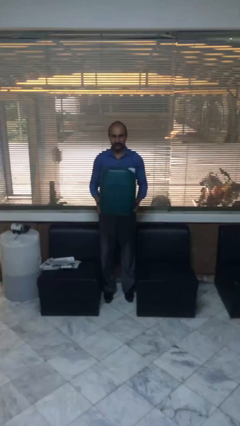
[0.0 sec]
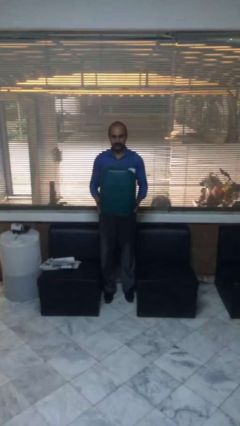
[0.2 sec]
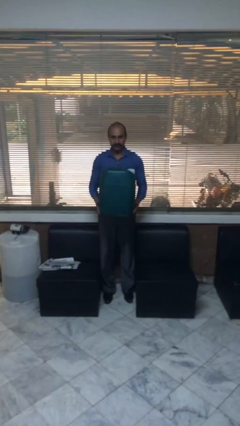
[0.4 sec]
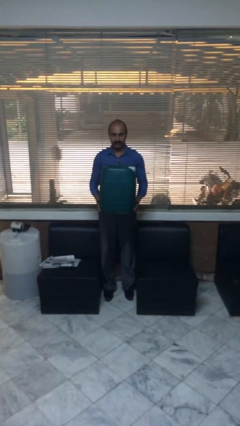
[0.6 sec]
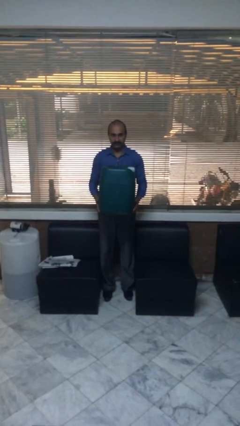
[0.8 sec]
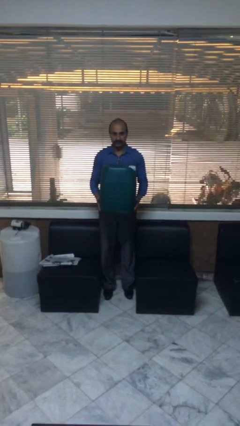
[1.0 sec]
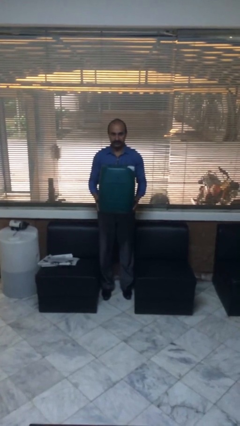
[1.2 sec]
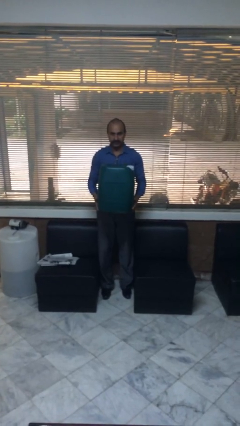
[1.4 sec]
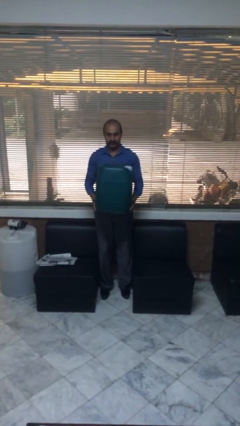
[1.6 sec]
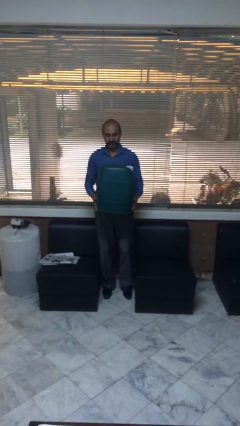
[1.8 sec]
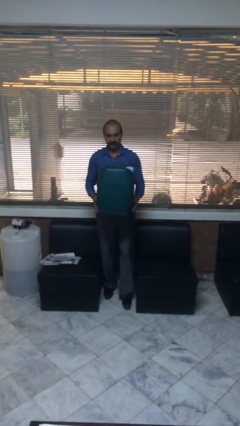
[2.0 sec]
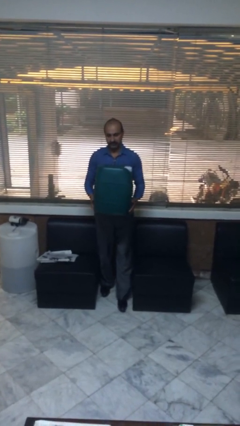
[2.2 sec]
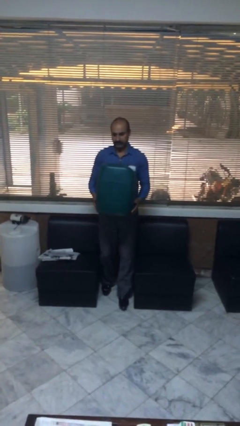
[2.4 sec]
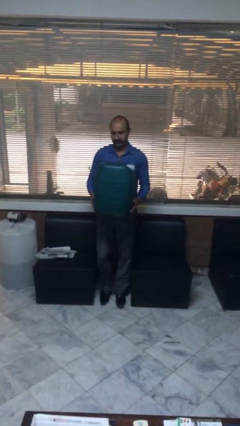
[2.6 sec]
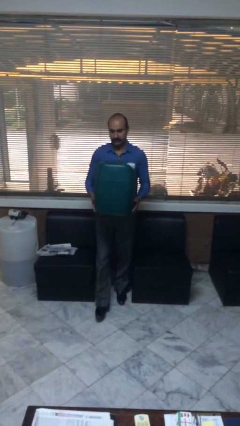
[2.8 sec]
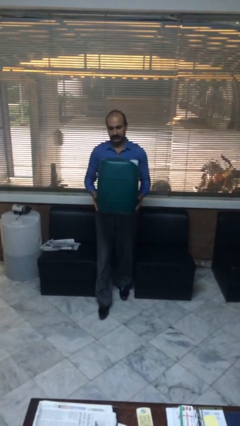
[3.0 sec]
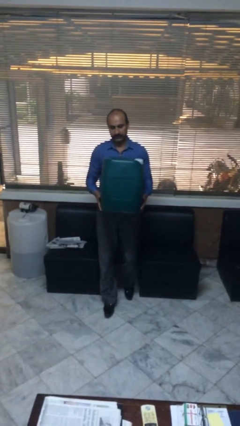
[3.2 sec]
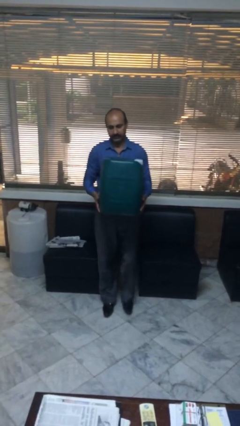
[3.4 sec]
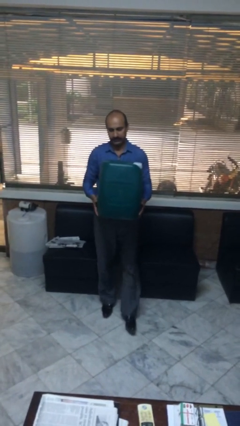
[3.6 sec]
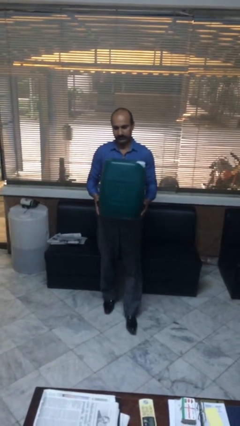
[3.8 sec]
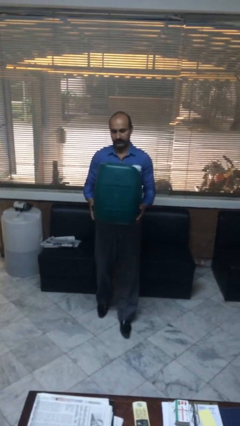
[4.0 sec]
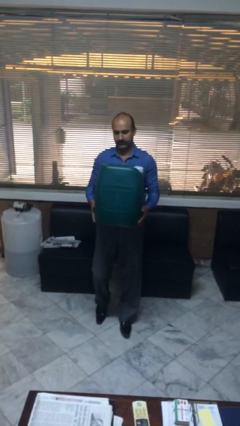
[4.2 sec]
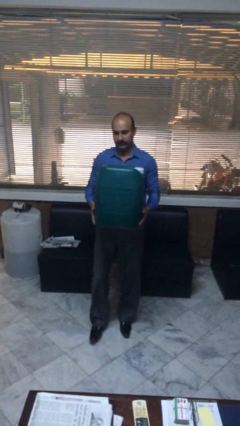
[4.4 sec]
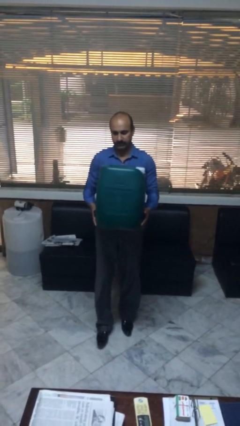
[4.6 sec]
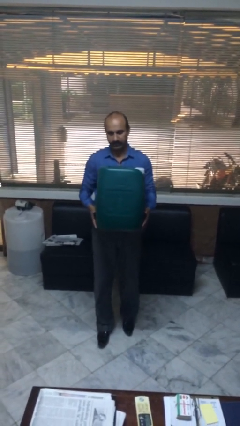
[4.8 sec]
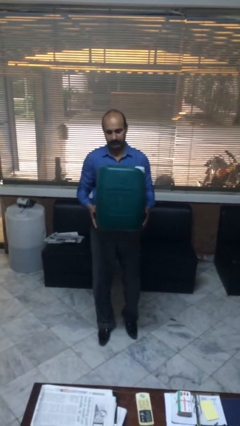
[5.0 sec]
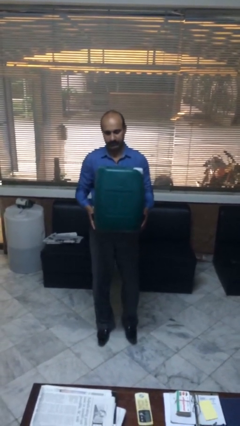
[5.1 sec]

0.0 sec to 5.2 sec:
person carries heavy object

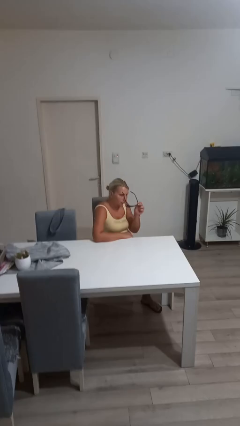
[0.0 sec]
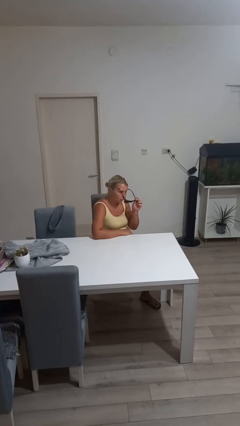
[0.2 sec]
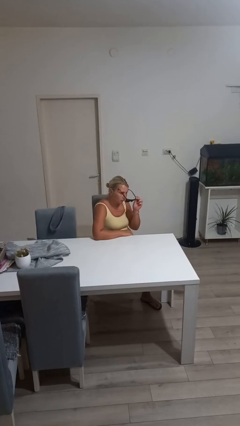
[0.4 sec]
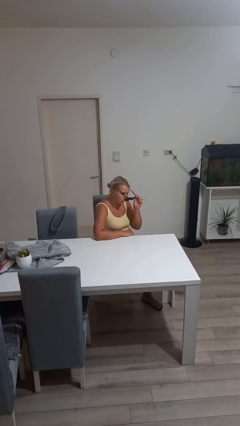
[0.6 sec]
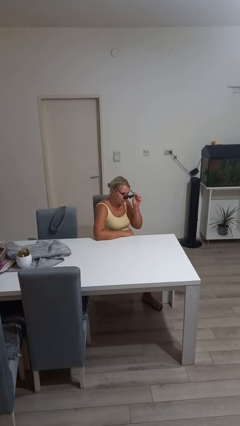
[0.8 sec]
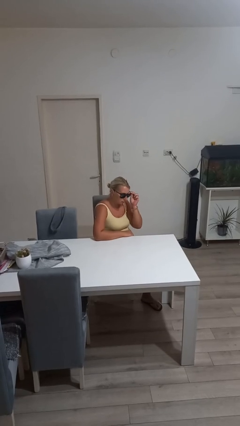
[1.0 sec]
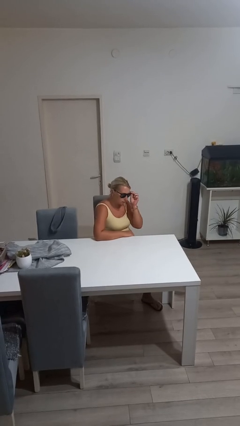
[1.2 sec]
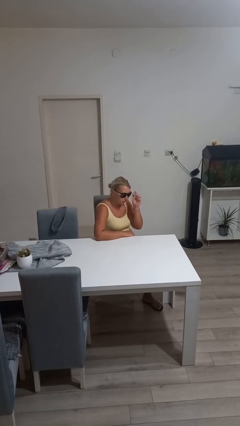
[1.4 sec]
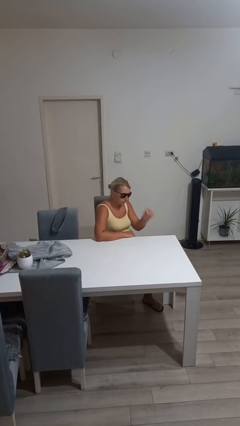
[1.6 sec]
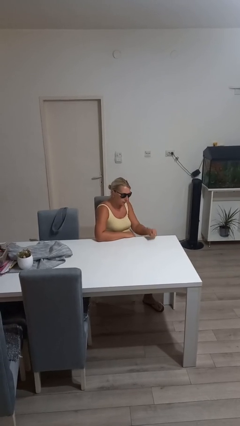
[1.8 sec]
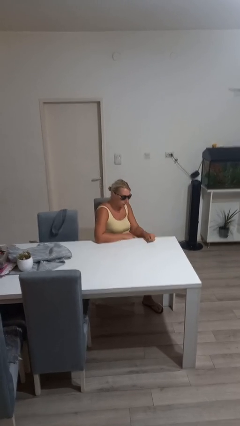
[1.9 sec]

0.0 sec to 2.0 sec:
person puts on sunglasses

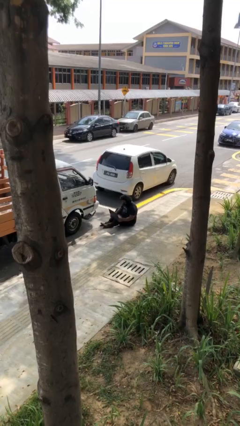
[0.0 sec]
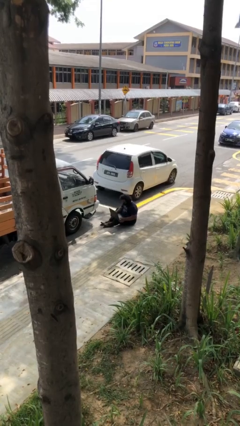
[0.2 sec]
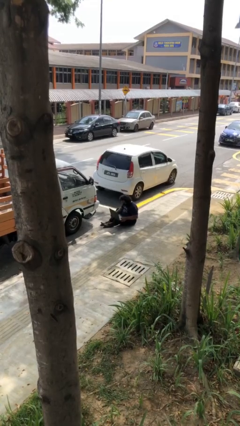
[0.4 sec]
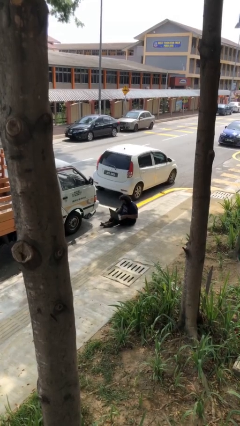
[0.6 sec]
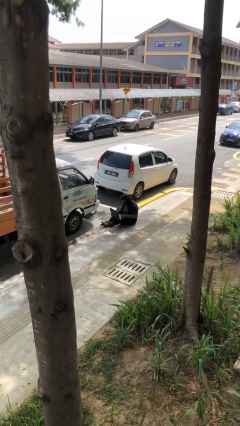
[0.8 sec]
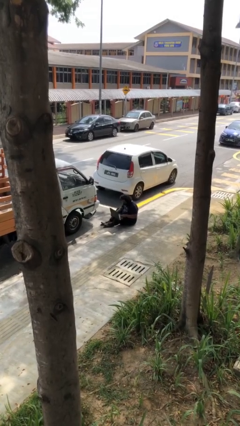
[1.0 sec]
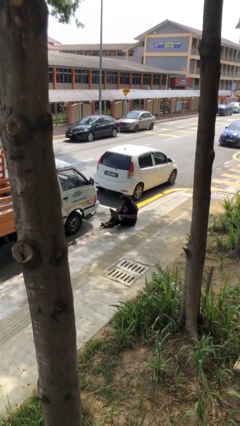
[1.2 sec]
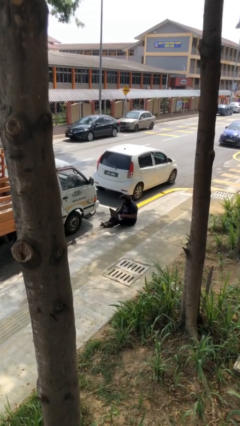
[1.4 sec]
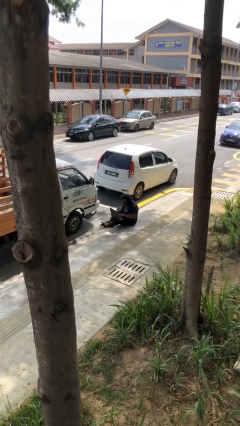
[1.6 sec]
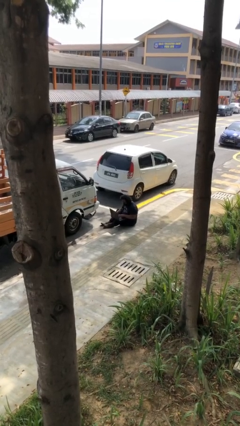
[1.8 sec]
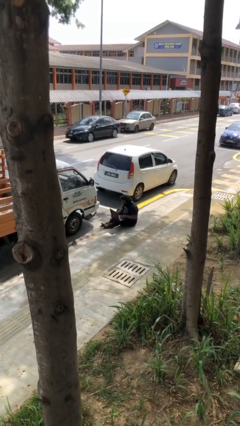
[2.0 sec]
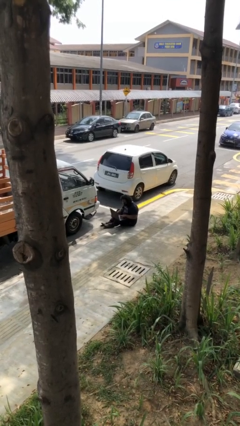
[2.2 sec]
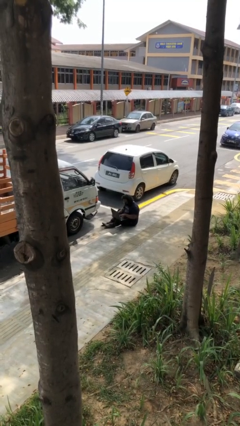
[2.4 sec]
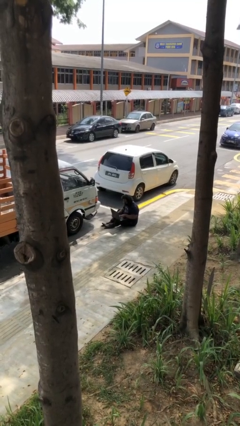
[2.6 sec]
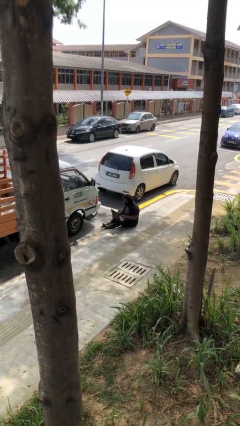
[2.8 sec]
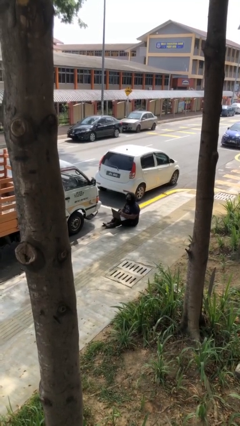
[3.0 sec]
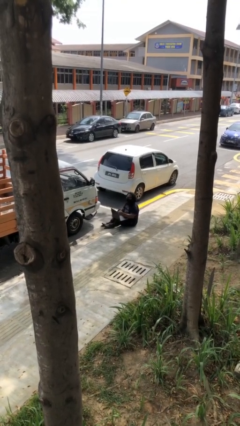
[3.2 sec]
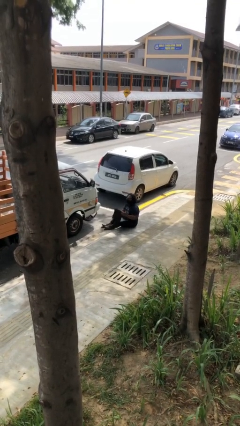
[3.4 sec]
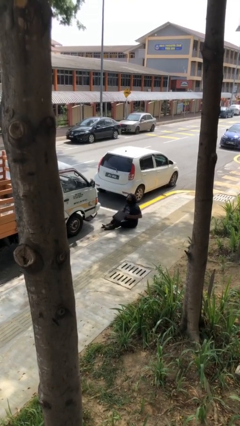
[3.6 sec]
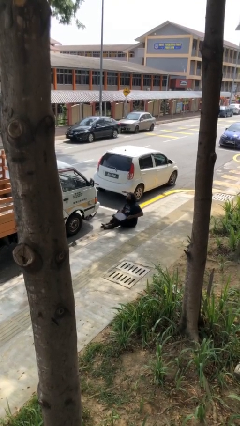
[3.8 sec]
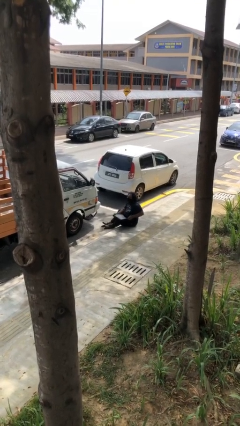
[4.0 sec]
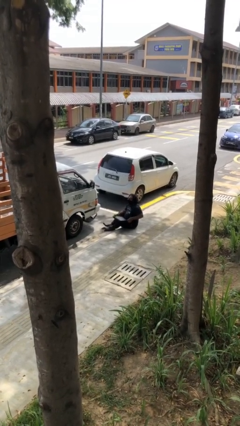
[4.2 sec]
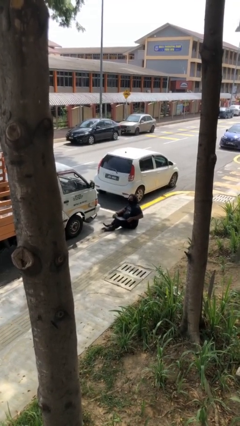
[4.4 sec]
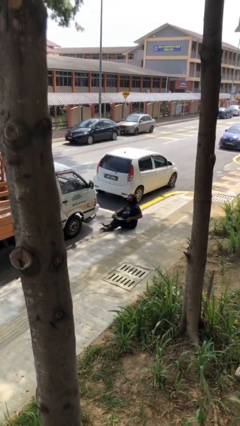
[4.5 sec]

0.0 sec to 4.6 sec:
person interacts with laptop

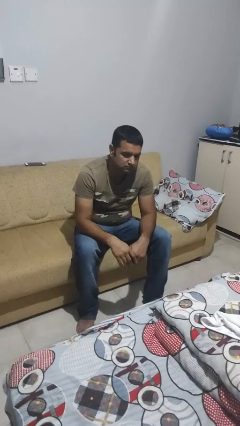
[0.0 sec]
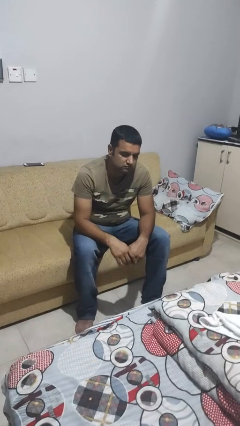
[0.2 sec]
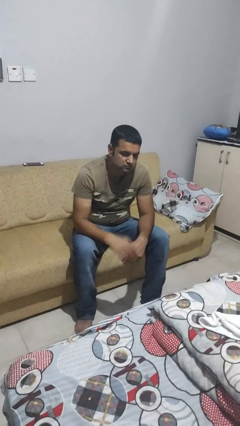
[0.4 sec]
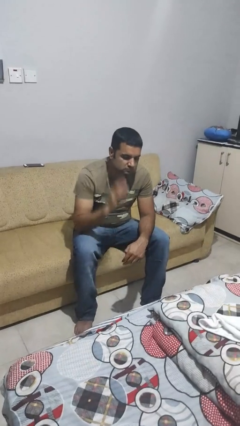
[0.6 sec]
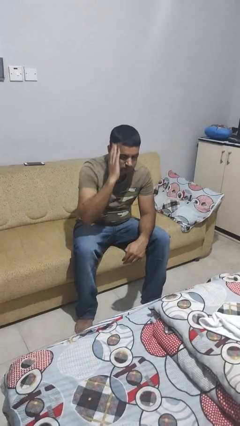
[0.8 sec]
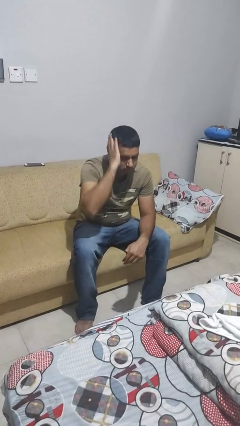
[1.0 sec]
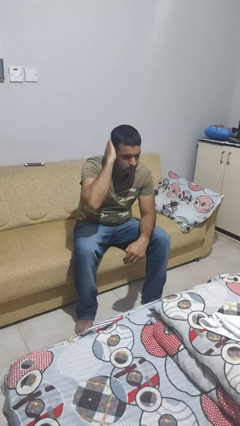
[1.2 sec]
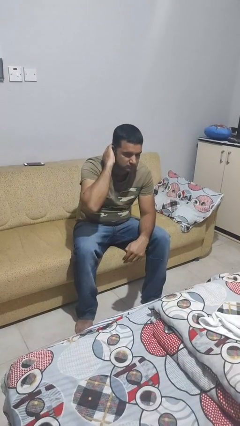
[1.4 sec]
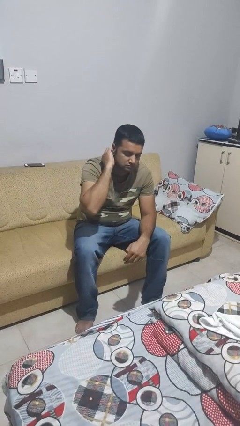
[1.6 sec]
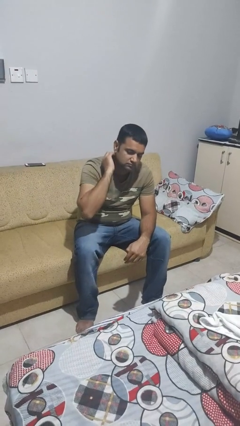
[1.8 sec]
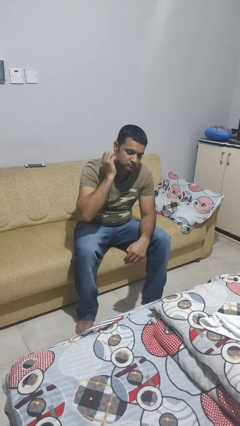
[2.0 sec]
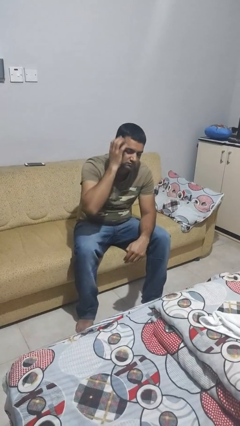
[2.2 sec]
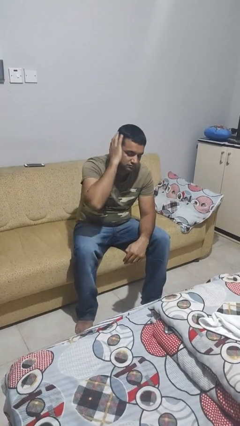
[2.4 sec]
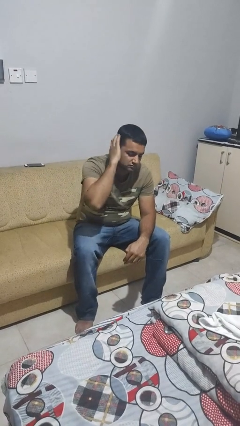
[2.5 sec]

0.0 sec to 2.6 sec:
person strokes hair

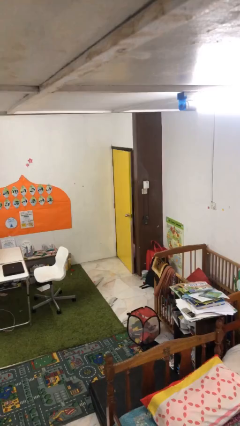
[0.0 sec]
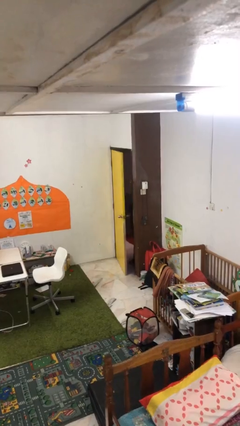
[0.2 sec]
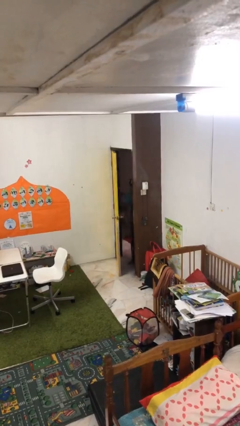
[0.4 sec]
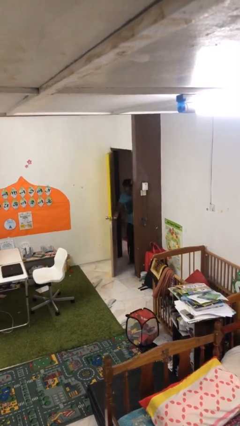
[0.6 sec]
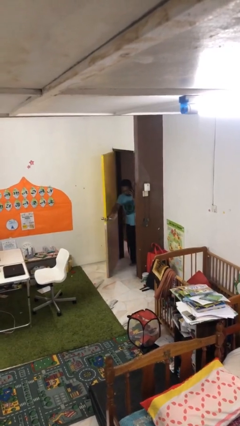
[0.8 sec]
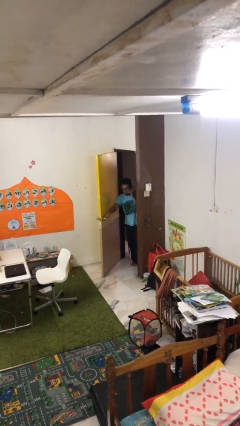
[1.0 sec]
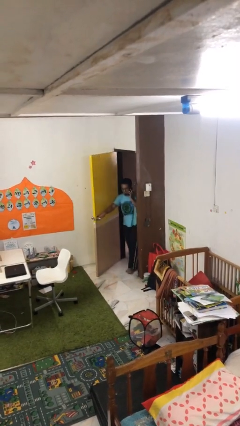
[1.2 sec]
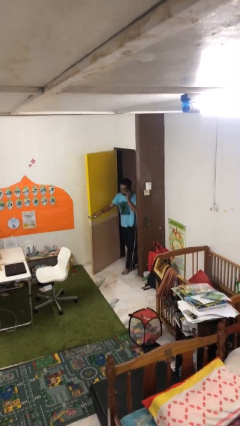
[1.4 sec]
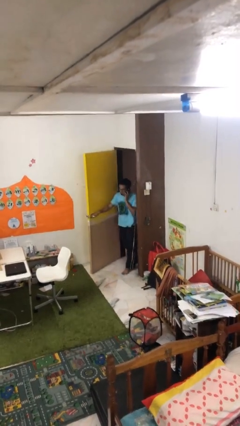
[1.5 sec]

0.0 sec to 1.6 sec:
person opens facility door

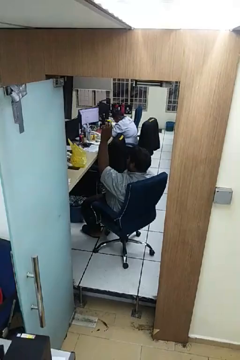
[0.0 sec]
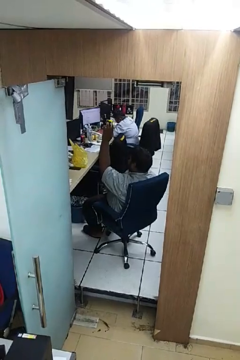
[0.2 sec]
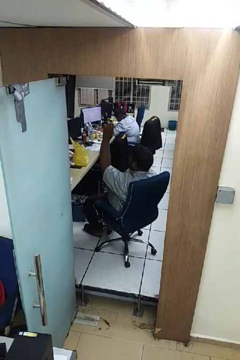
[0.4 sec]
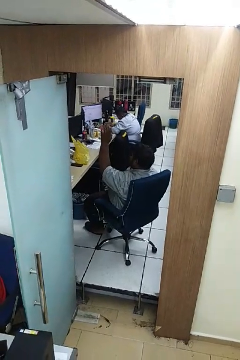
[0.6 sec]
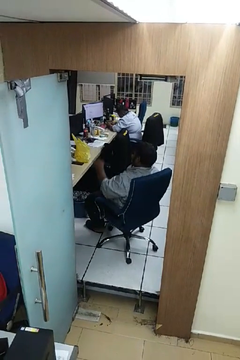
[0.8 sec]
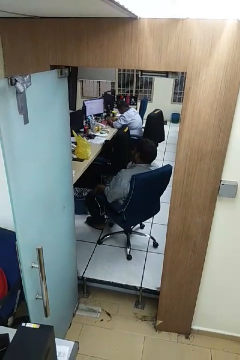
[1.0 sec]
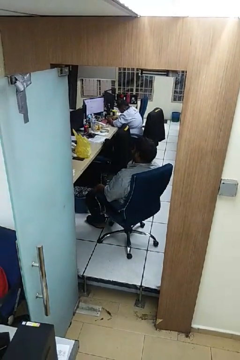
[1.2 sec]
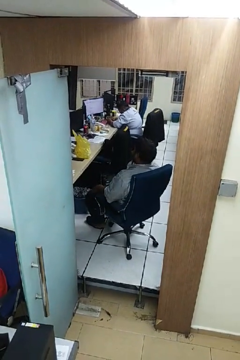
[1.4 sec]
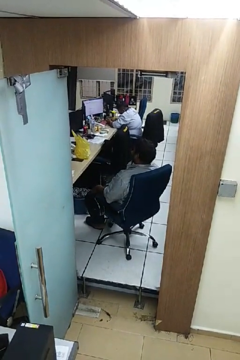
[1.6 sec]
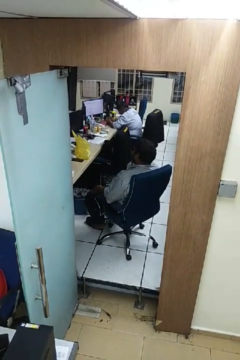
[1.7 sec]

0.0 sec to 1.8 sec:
person gestures lower hand
